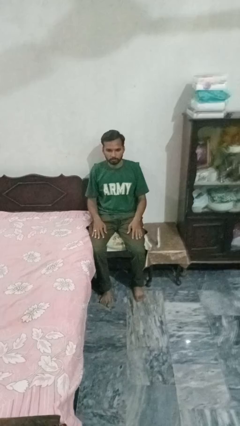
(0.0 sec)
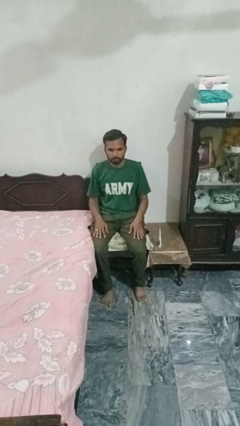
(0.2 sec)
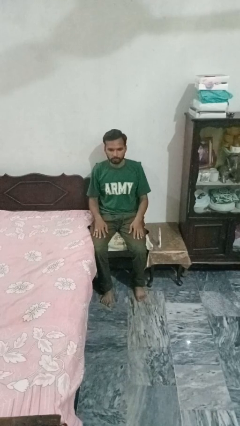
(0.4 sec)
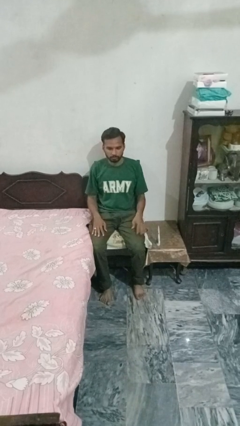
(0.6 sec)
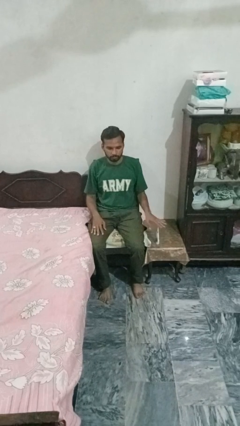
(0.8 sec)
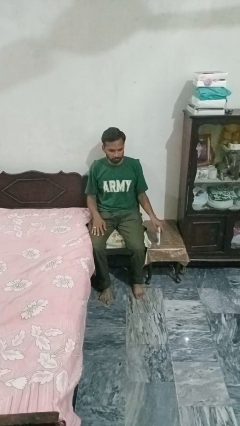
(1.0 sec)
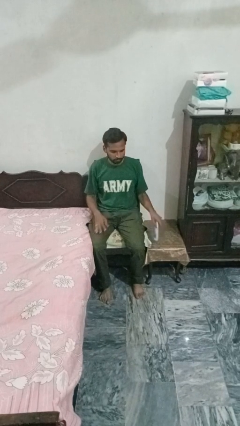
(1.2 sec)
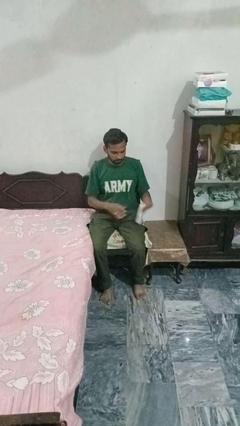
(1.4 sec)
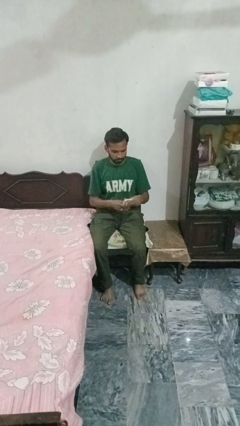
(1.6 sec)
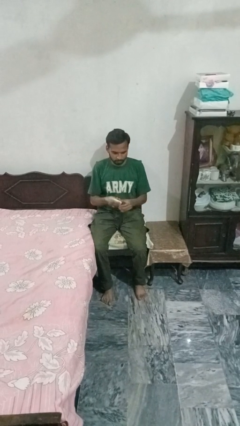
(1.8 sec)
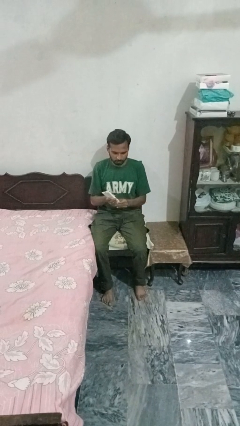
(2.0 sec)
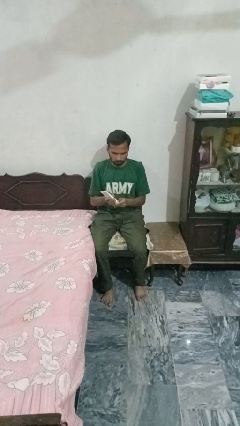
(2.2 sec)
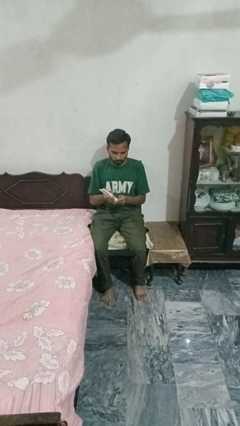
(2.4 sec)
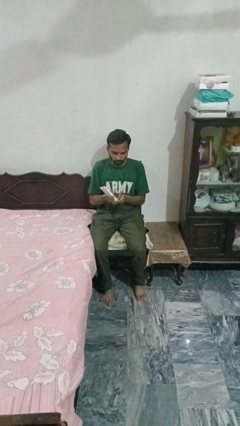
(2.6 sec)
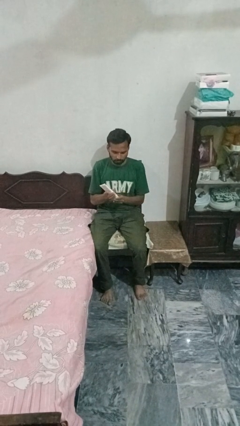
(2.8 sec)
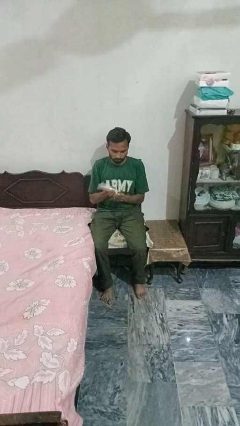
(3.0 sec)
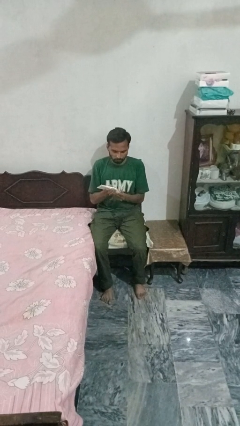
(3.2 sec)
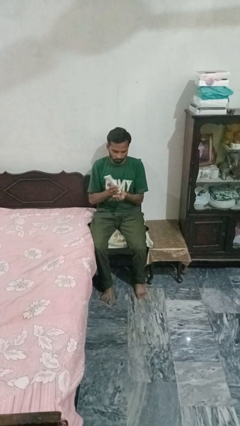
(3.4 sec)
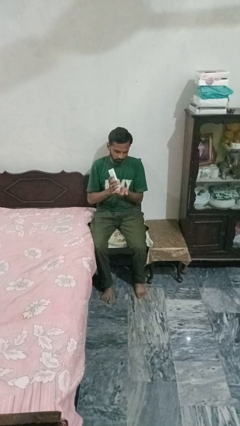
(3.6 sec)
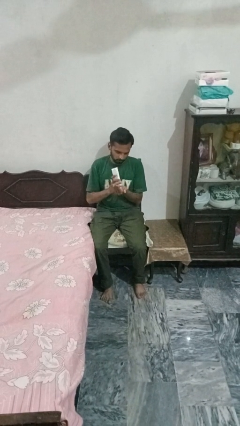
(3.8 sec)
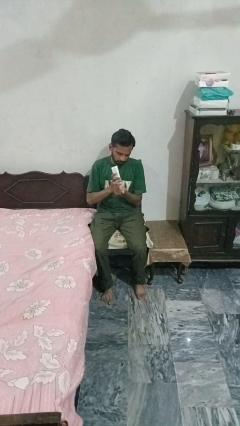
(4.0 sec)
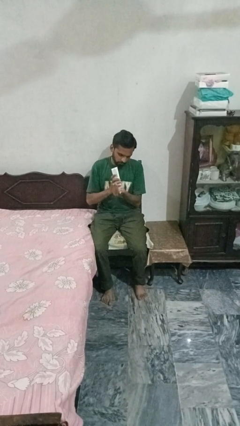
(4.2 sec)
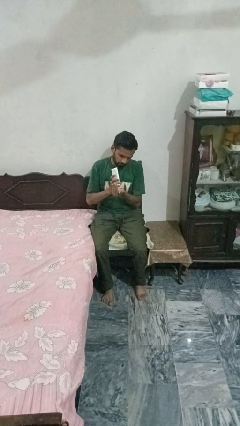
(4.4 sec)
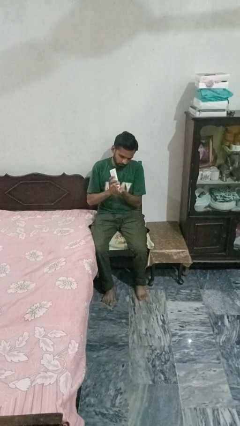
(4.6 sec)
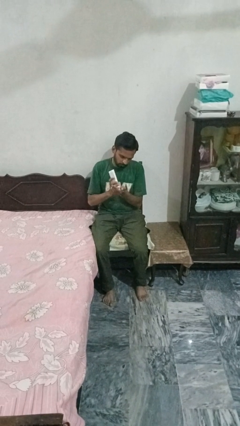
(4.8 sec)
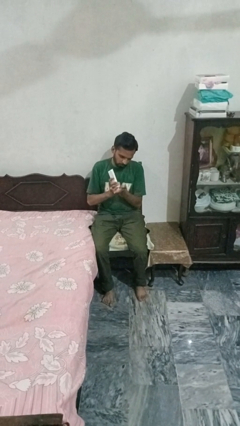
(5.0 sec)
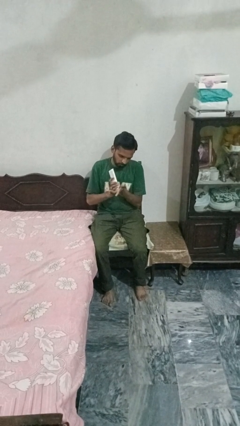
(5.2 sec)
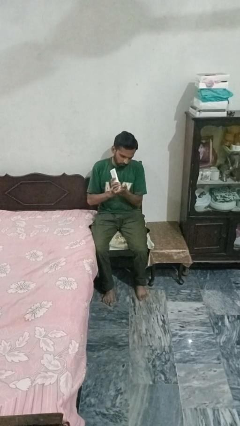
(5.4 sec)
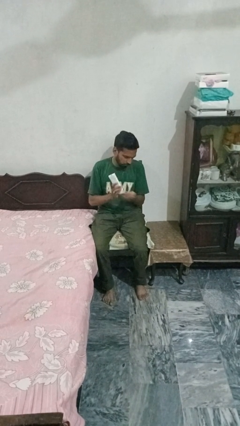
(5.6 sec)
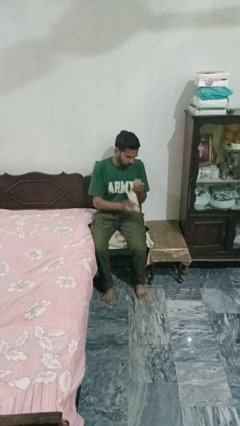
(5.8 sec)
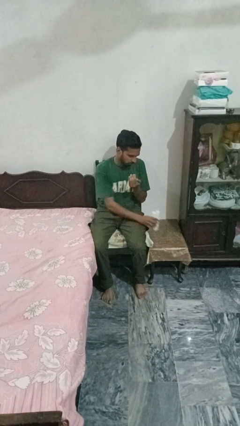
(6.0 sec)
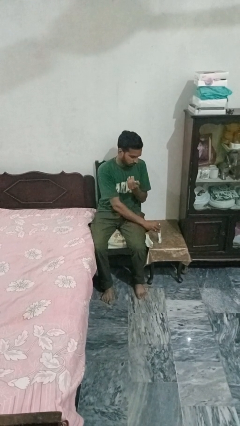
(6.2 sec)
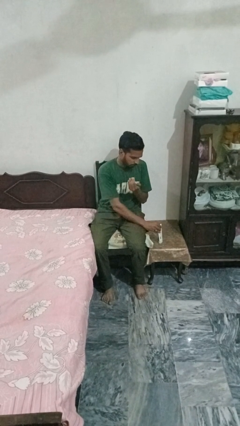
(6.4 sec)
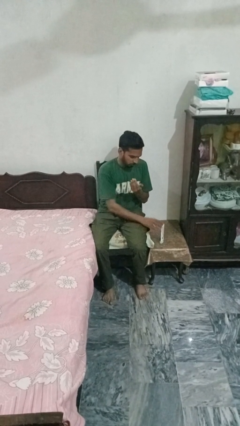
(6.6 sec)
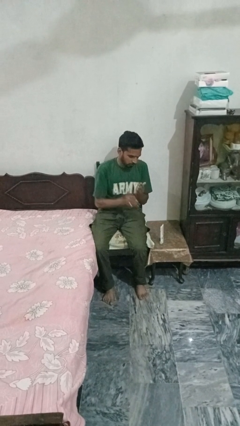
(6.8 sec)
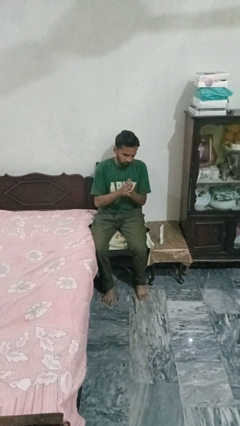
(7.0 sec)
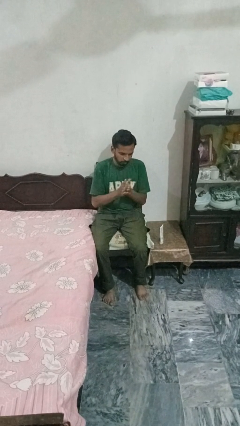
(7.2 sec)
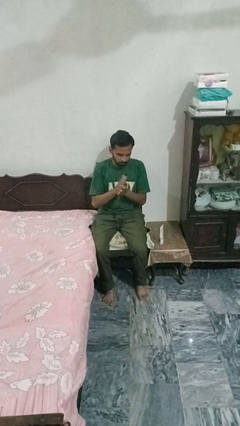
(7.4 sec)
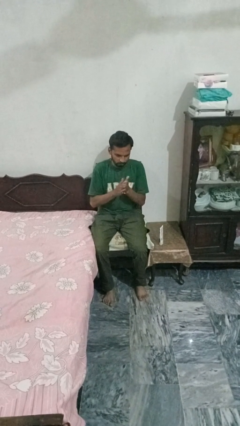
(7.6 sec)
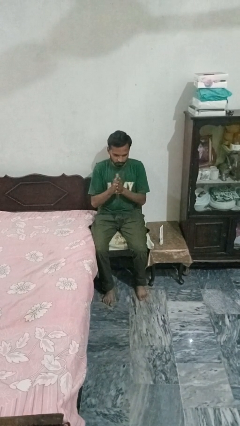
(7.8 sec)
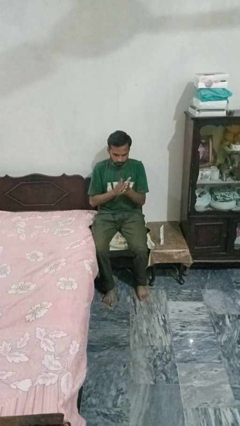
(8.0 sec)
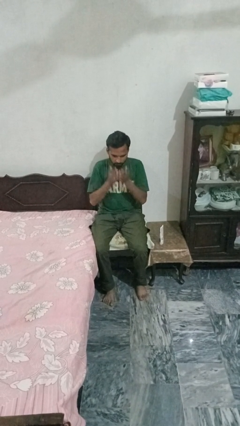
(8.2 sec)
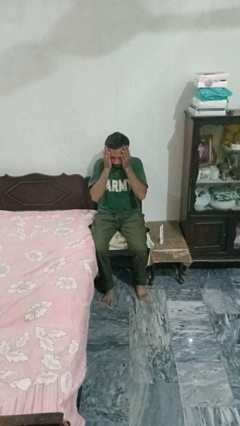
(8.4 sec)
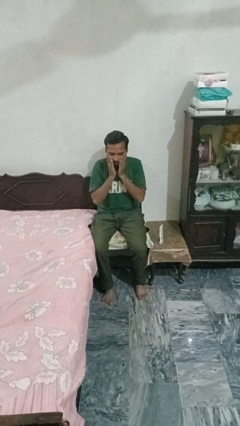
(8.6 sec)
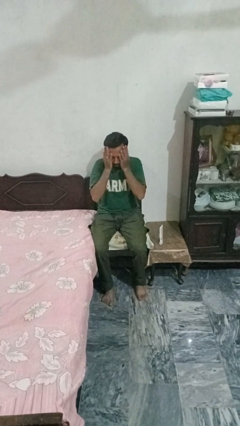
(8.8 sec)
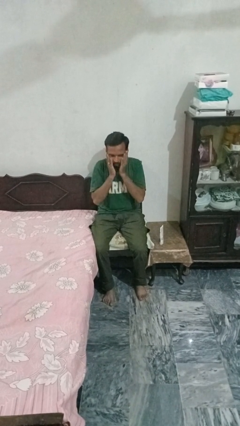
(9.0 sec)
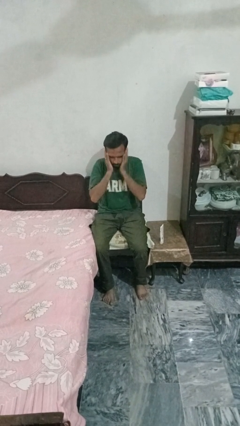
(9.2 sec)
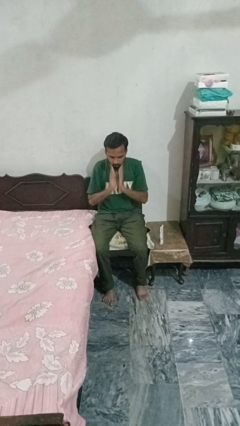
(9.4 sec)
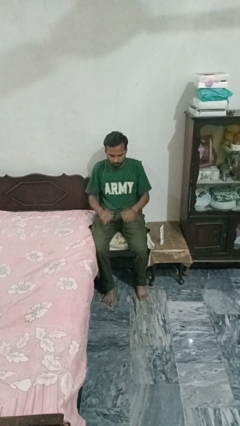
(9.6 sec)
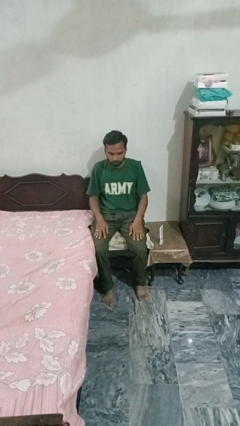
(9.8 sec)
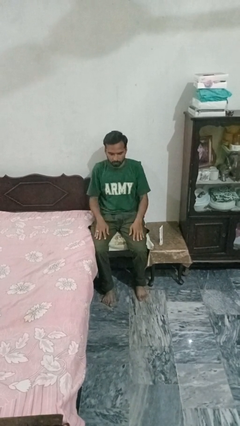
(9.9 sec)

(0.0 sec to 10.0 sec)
person applies facial moisturizer

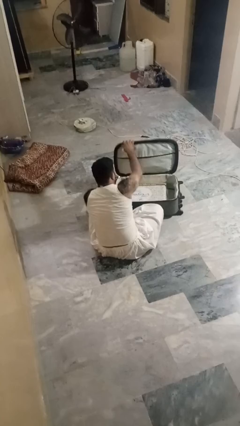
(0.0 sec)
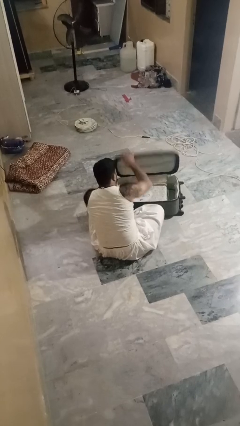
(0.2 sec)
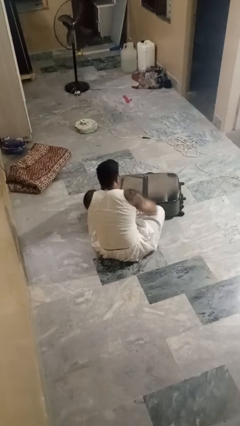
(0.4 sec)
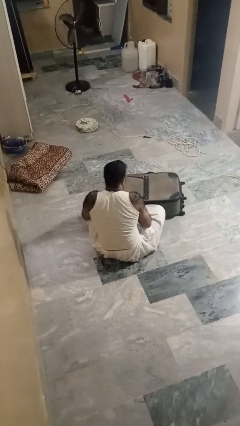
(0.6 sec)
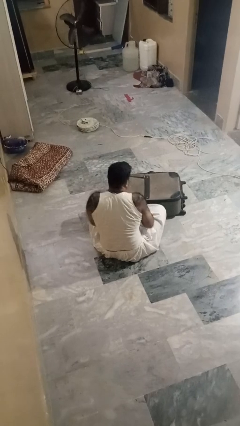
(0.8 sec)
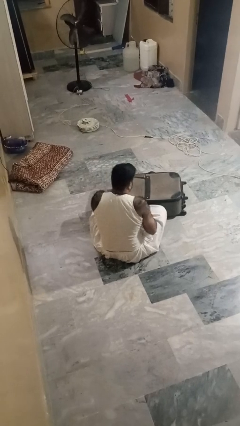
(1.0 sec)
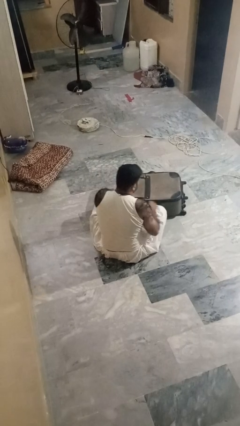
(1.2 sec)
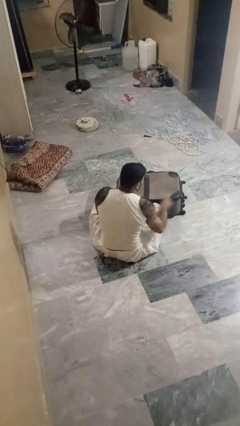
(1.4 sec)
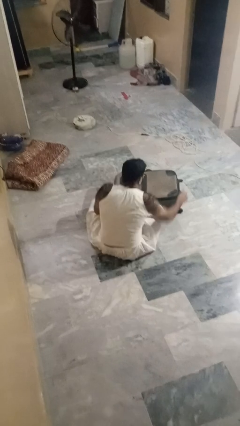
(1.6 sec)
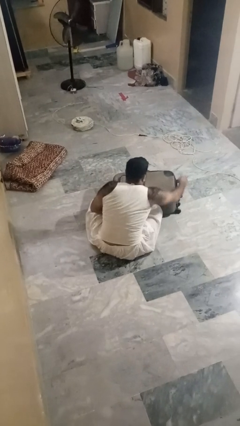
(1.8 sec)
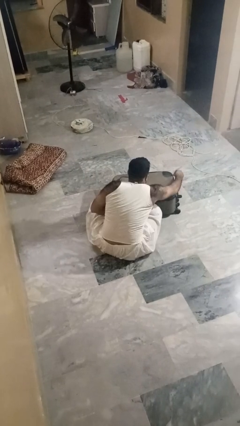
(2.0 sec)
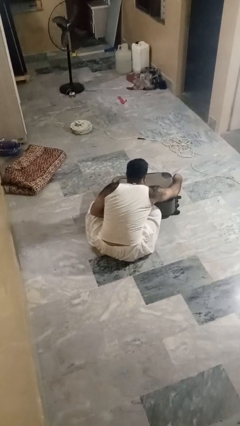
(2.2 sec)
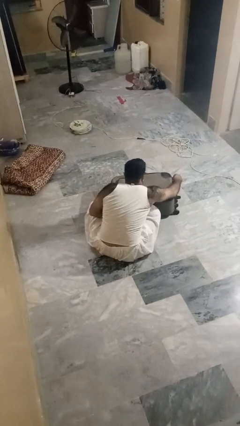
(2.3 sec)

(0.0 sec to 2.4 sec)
person closes suitcase

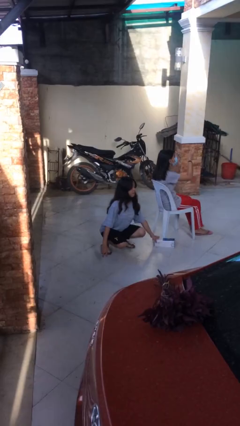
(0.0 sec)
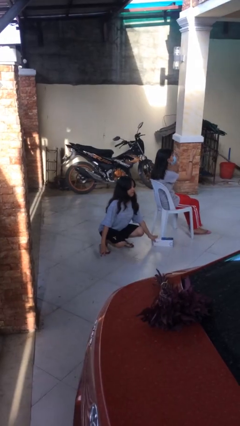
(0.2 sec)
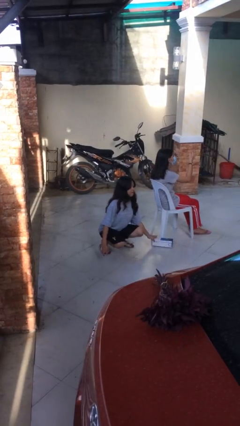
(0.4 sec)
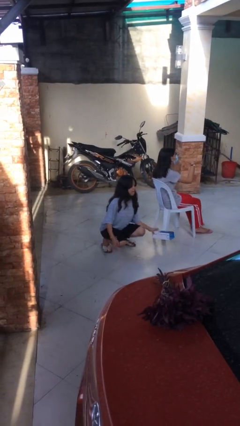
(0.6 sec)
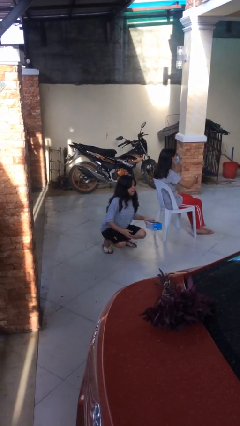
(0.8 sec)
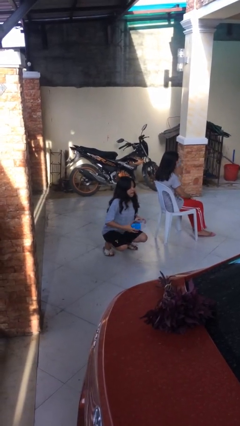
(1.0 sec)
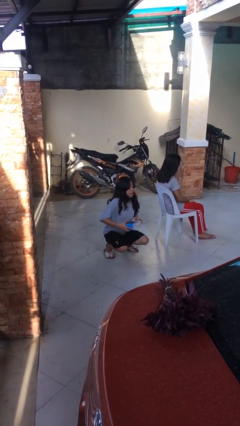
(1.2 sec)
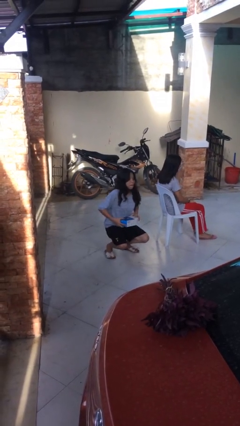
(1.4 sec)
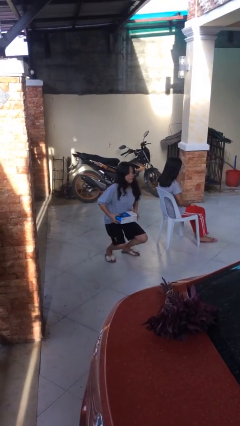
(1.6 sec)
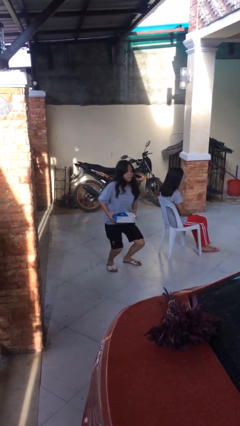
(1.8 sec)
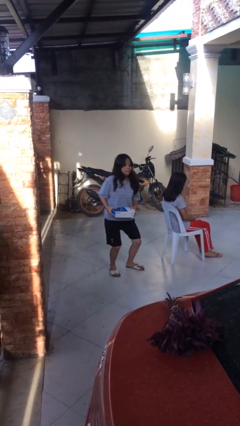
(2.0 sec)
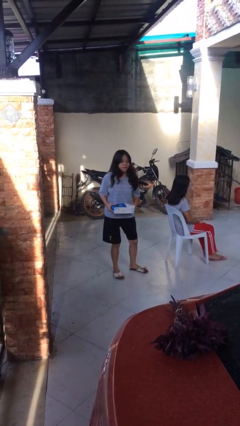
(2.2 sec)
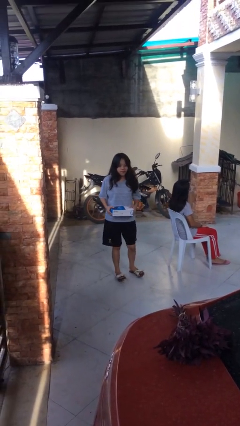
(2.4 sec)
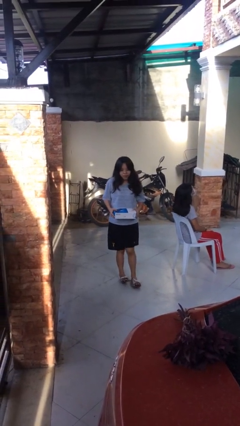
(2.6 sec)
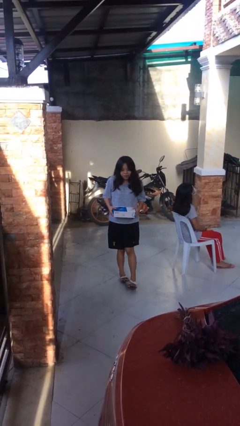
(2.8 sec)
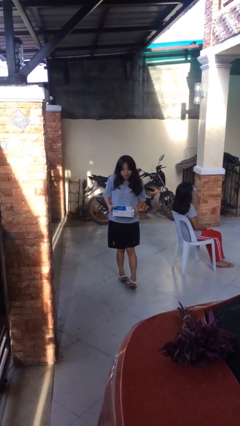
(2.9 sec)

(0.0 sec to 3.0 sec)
person steals object from person

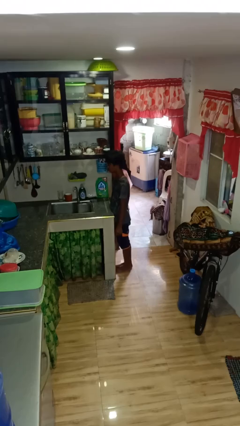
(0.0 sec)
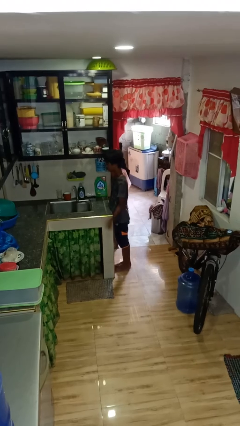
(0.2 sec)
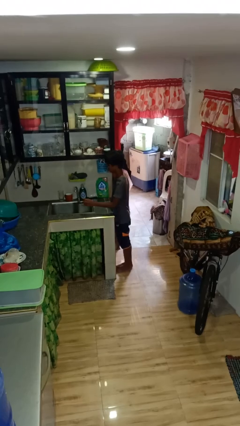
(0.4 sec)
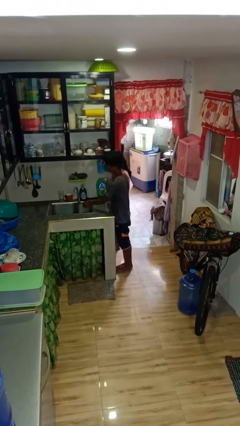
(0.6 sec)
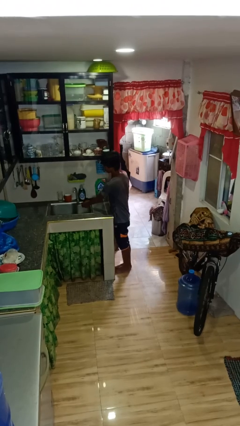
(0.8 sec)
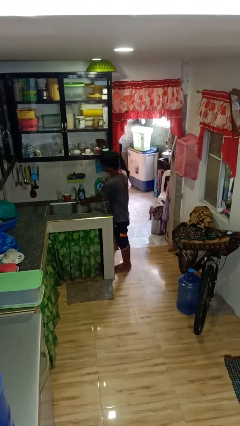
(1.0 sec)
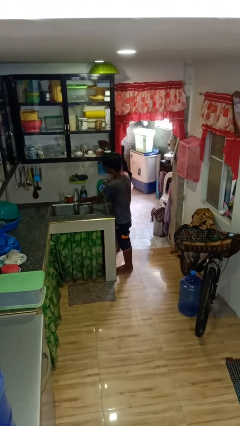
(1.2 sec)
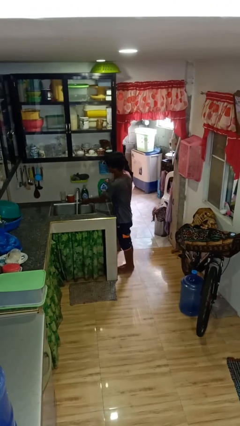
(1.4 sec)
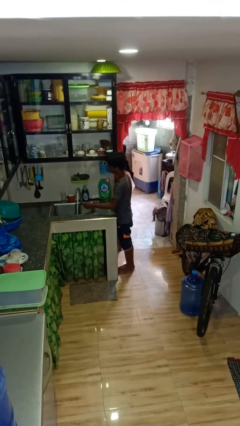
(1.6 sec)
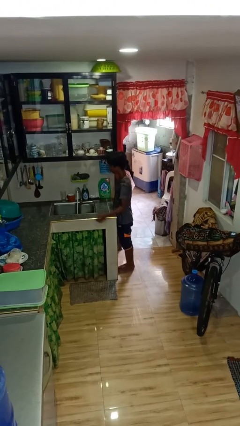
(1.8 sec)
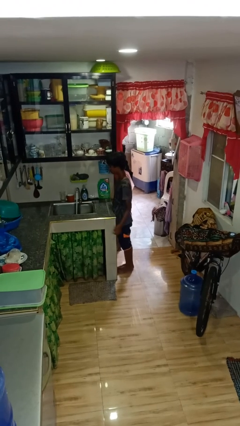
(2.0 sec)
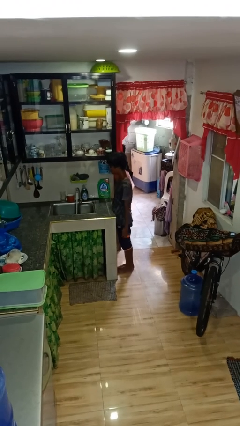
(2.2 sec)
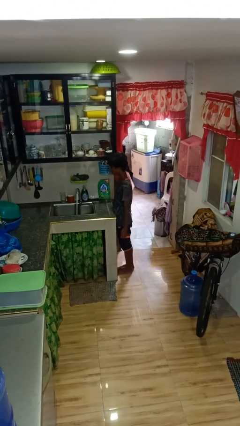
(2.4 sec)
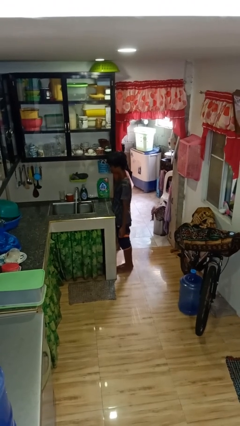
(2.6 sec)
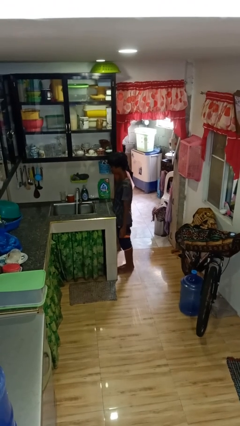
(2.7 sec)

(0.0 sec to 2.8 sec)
person turns on faucet
